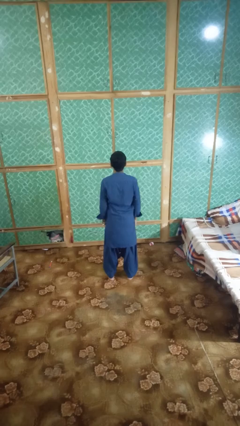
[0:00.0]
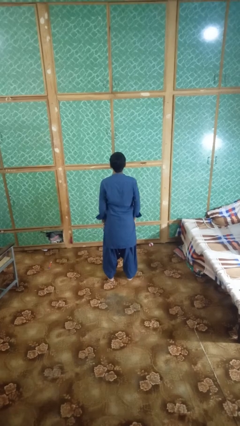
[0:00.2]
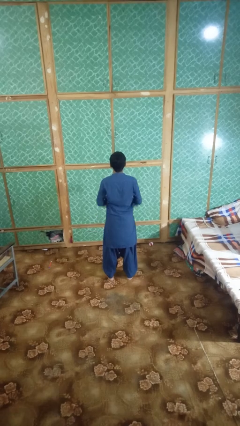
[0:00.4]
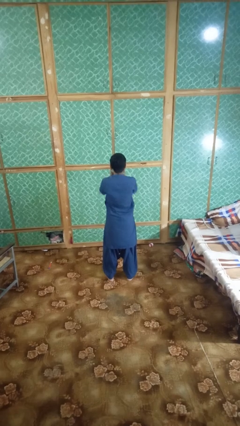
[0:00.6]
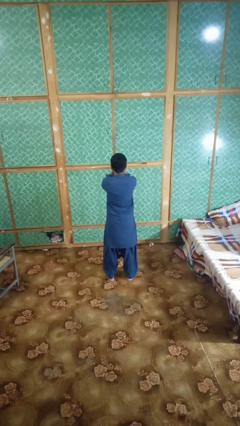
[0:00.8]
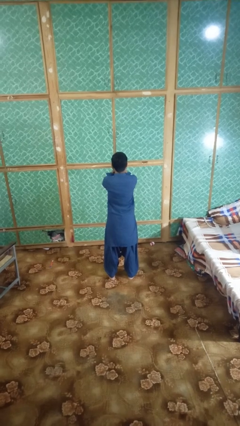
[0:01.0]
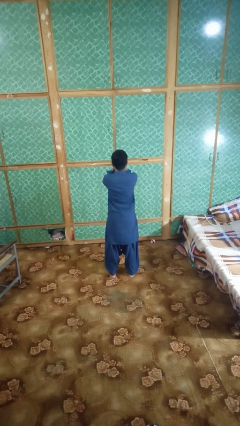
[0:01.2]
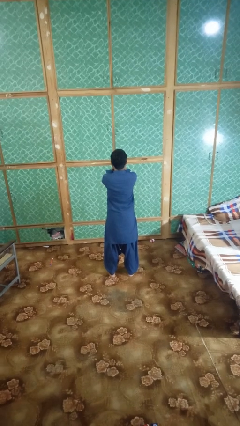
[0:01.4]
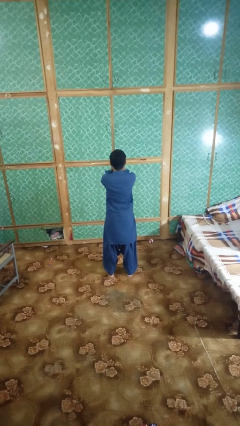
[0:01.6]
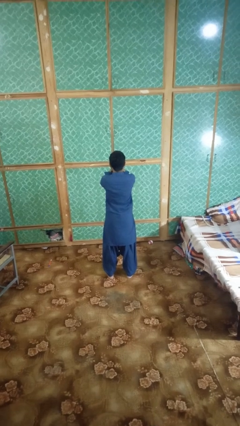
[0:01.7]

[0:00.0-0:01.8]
person covers face with hands

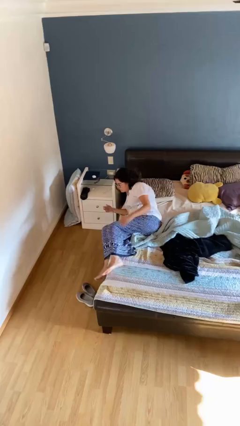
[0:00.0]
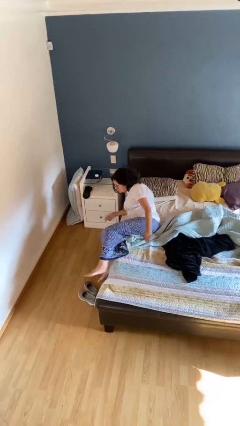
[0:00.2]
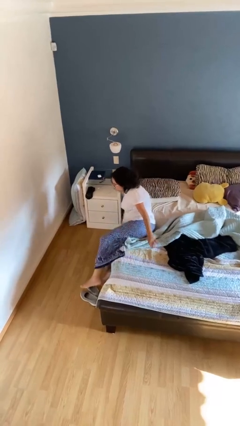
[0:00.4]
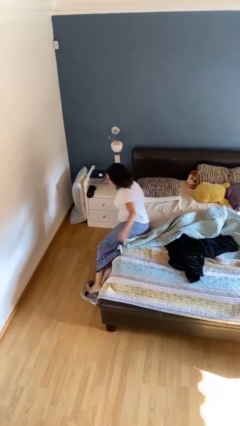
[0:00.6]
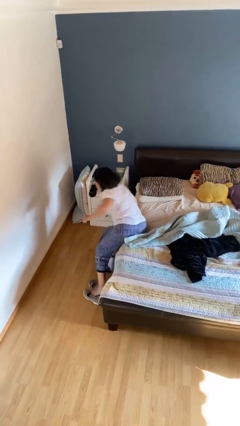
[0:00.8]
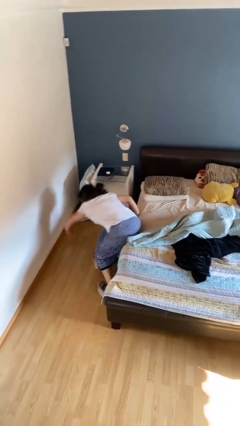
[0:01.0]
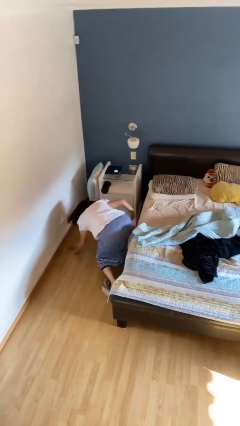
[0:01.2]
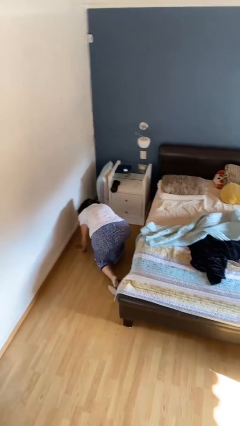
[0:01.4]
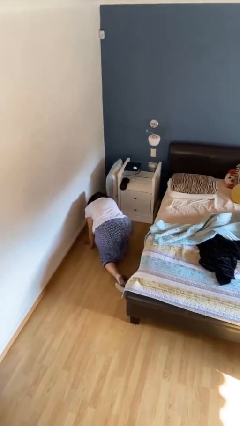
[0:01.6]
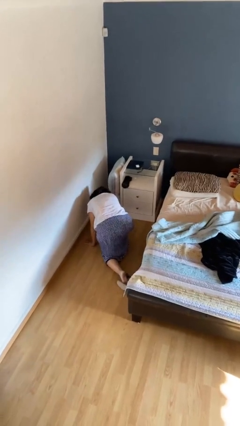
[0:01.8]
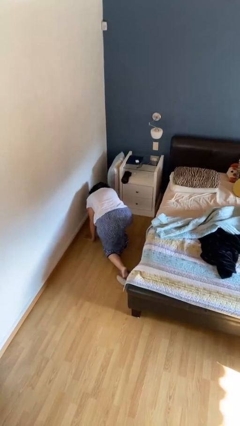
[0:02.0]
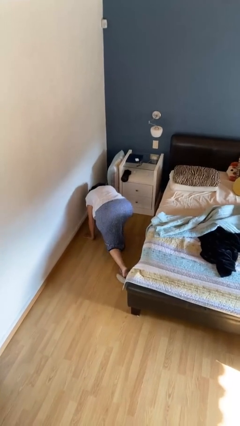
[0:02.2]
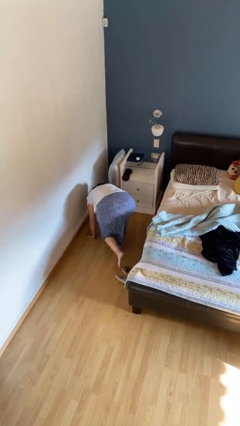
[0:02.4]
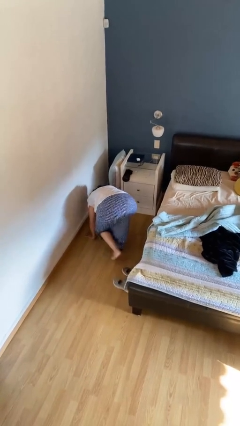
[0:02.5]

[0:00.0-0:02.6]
person falls from bed

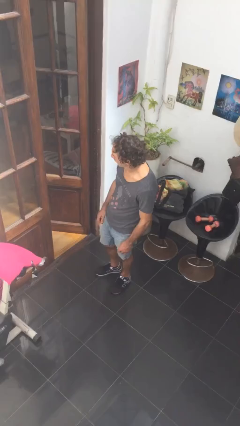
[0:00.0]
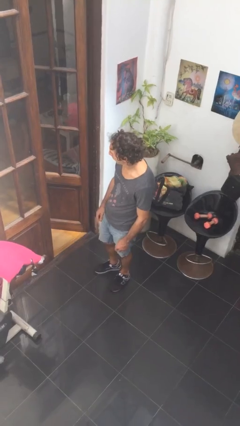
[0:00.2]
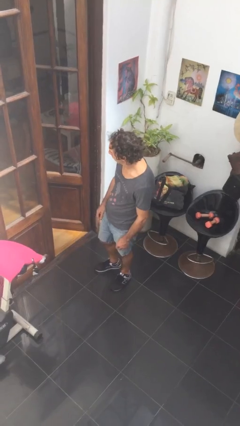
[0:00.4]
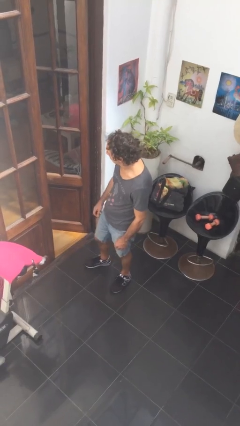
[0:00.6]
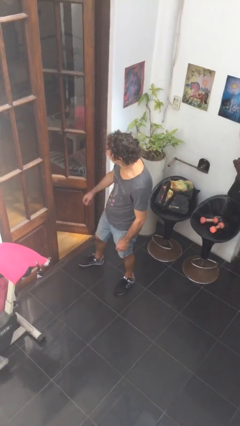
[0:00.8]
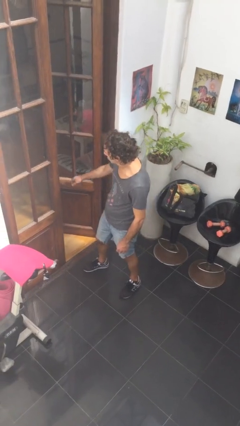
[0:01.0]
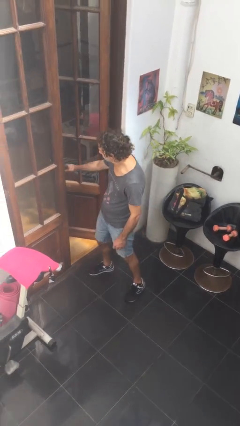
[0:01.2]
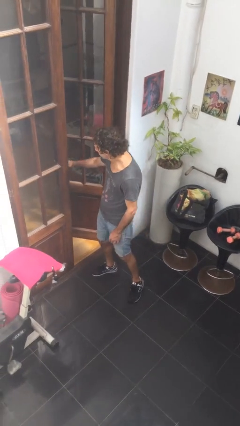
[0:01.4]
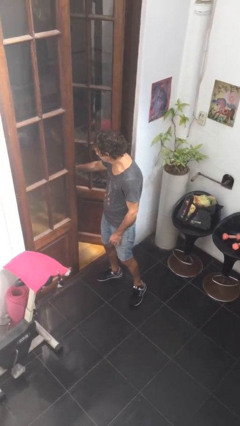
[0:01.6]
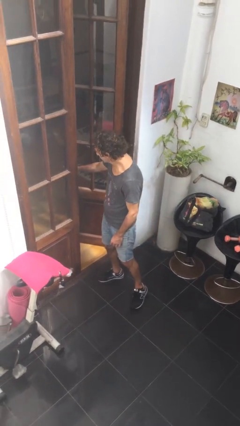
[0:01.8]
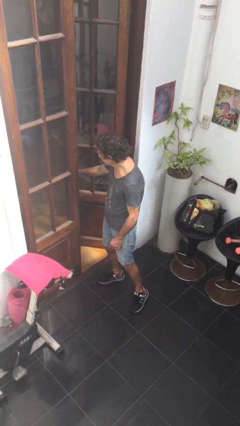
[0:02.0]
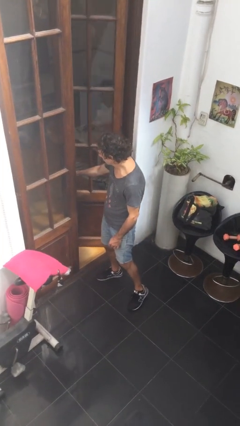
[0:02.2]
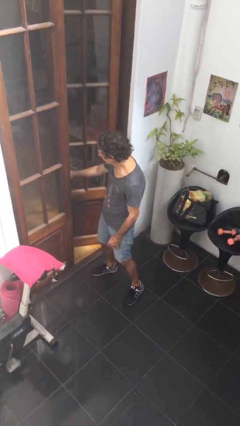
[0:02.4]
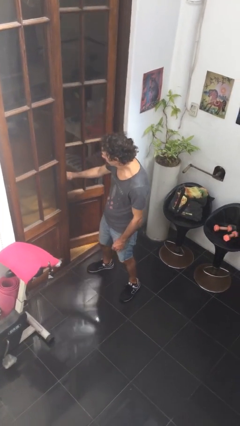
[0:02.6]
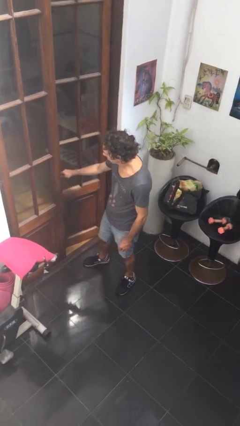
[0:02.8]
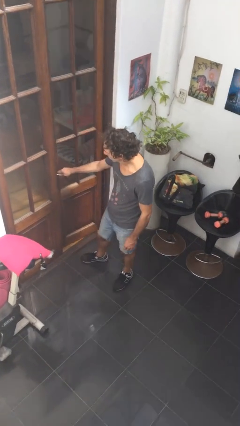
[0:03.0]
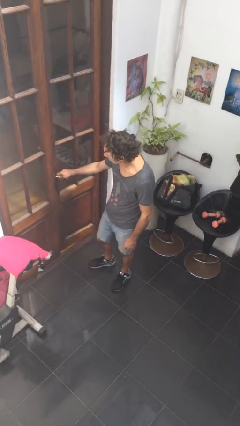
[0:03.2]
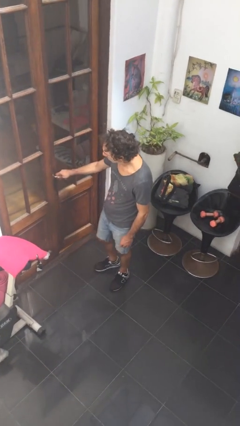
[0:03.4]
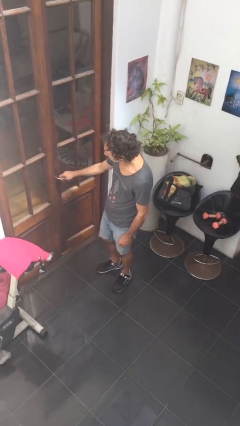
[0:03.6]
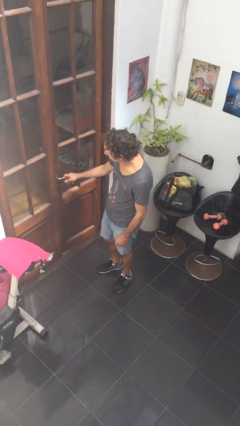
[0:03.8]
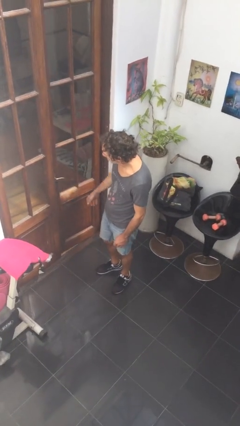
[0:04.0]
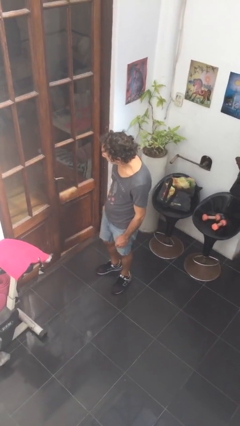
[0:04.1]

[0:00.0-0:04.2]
person closes facility door

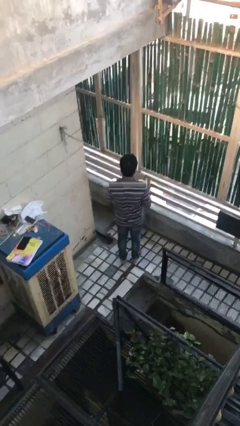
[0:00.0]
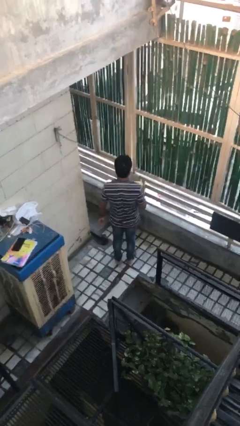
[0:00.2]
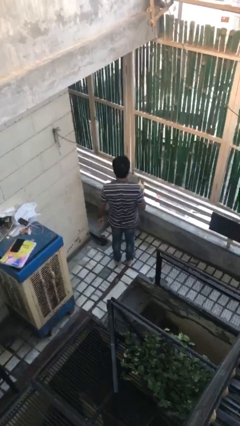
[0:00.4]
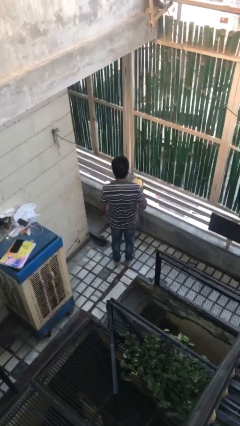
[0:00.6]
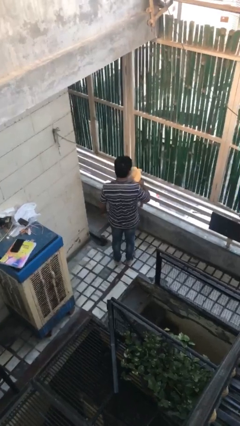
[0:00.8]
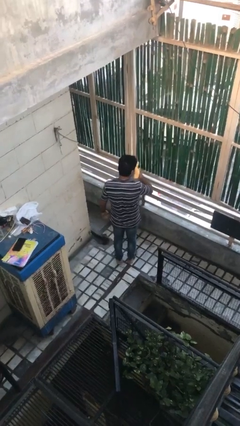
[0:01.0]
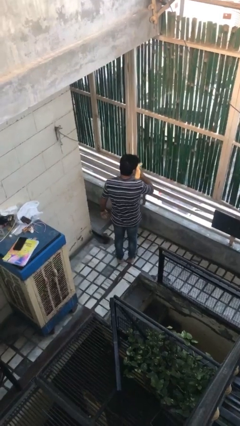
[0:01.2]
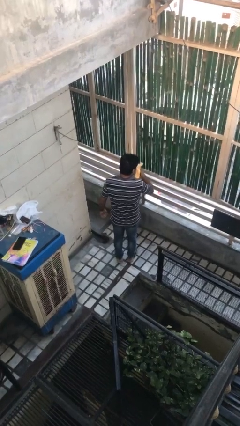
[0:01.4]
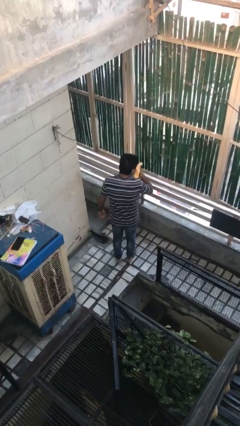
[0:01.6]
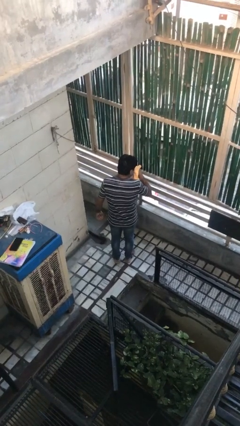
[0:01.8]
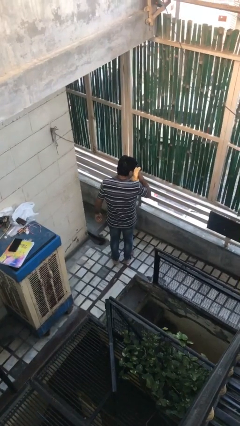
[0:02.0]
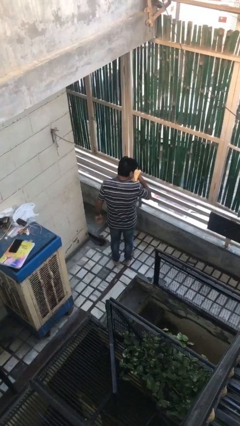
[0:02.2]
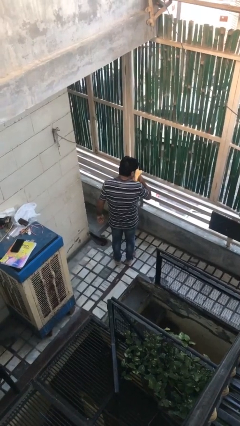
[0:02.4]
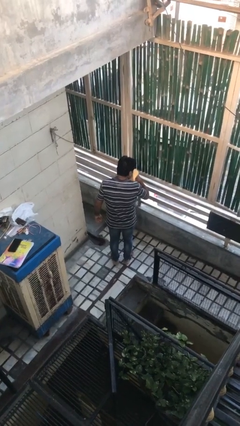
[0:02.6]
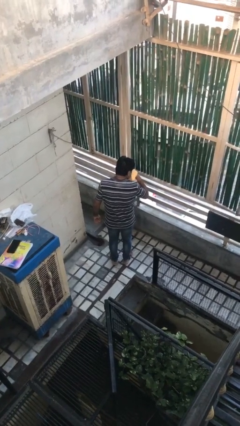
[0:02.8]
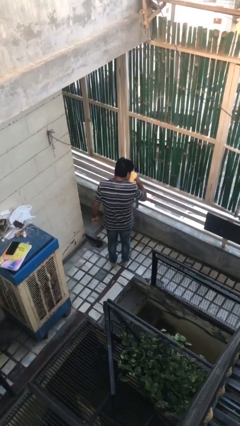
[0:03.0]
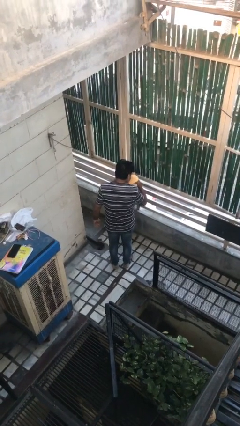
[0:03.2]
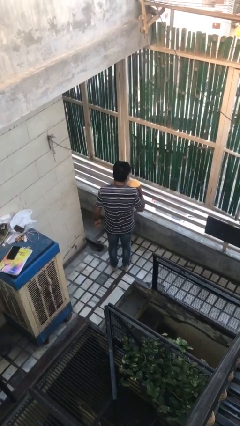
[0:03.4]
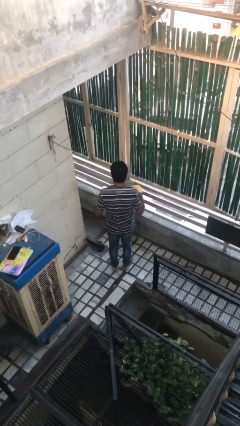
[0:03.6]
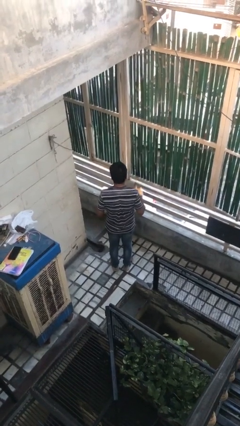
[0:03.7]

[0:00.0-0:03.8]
person blows nose

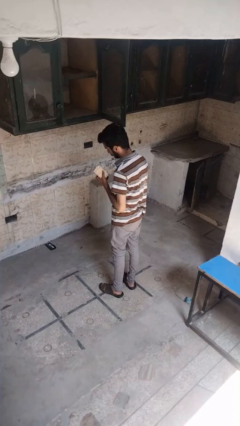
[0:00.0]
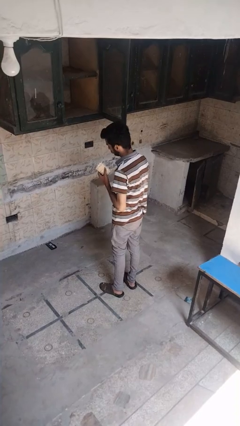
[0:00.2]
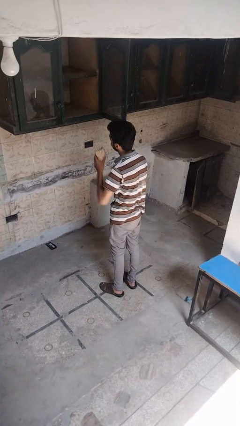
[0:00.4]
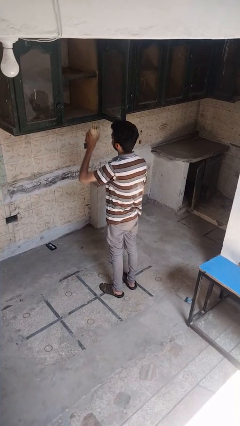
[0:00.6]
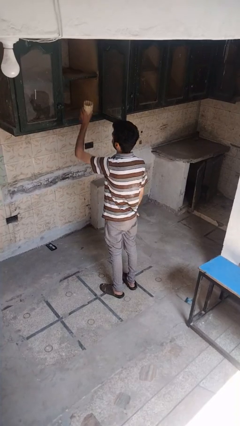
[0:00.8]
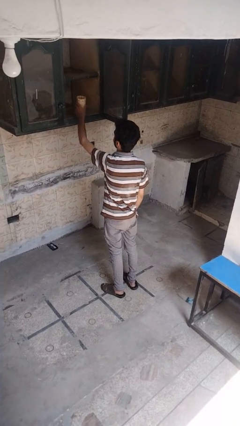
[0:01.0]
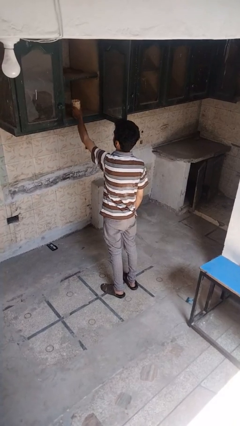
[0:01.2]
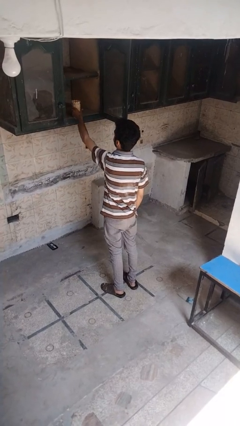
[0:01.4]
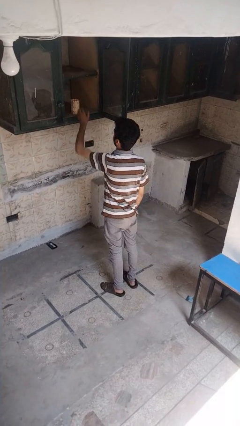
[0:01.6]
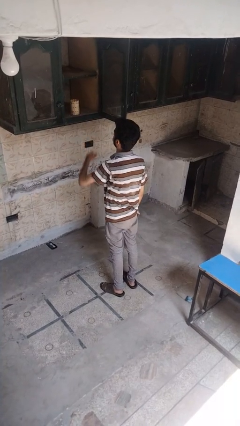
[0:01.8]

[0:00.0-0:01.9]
person puts down object into cabinet

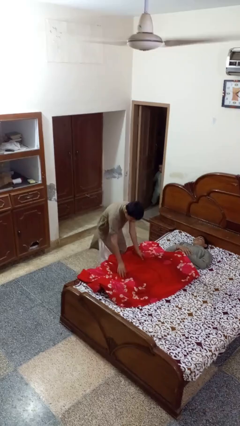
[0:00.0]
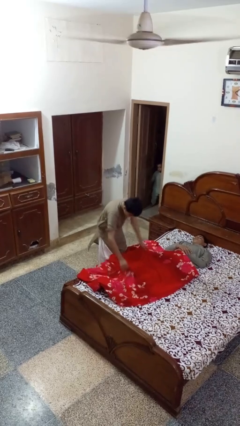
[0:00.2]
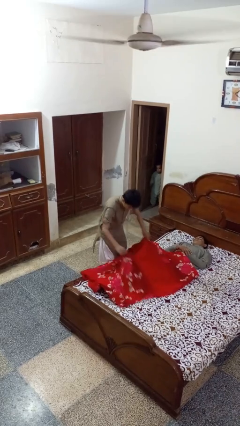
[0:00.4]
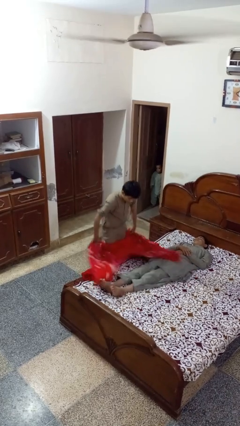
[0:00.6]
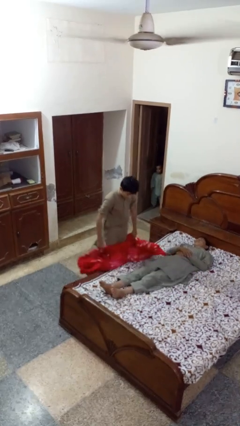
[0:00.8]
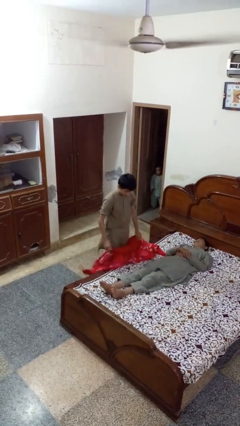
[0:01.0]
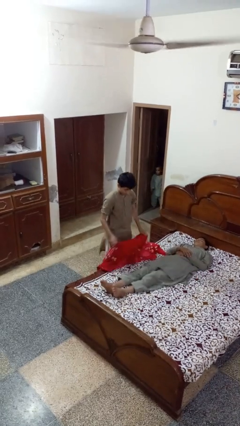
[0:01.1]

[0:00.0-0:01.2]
person uncovers friend with blanket

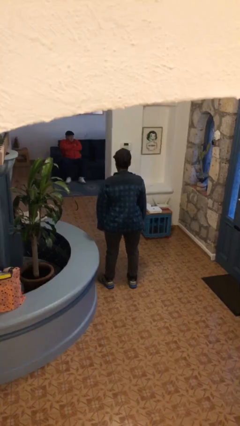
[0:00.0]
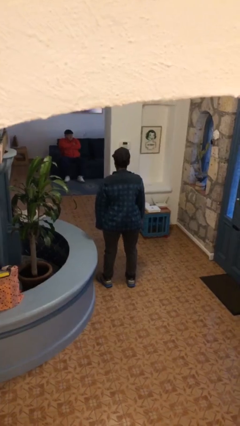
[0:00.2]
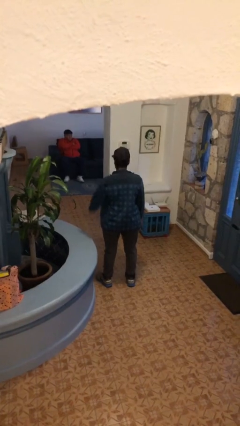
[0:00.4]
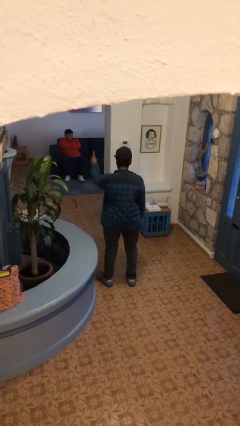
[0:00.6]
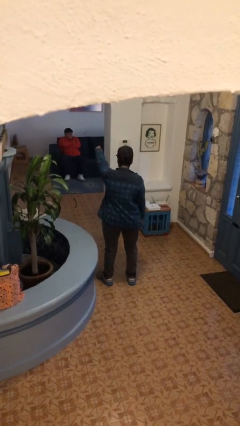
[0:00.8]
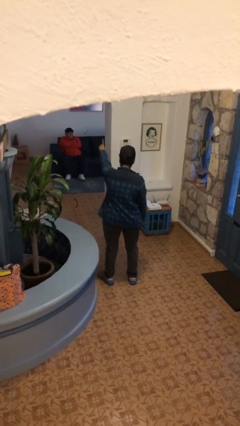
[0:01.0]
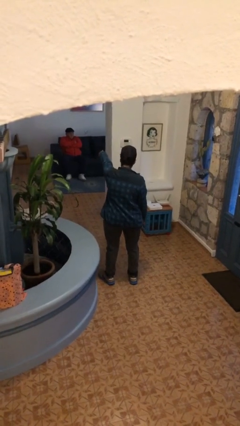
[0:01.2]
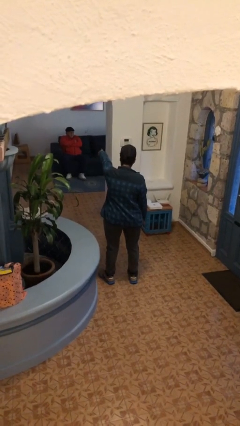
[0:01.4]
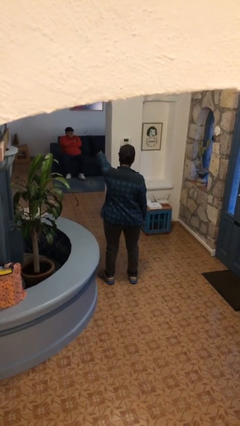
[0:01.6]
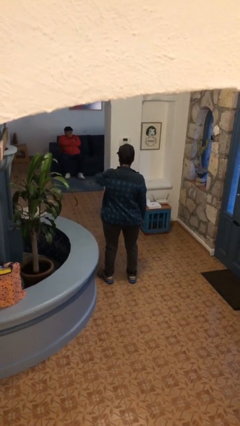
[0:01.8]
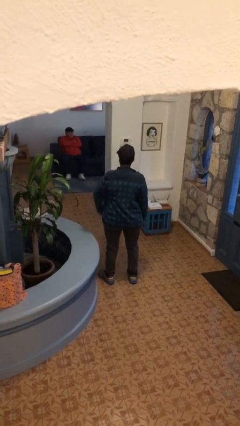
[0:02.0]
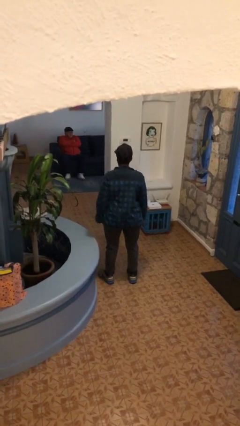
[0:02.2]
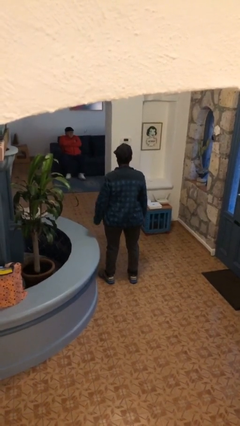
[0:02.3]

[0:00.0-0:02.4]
person points at person
